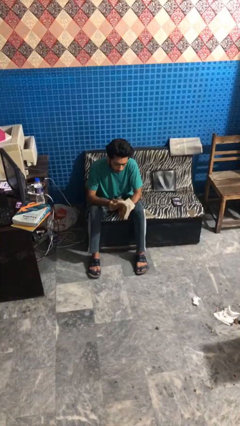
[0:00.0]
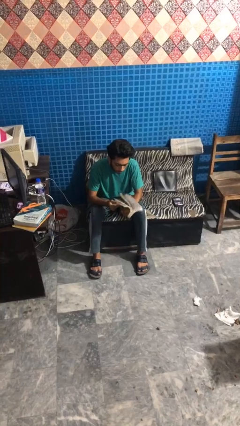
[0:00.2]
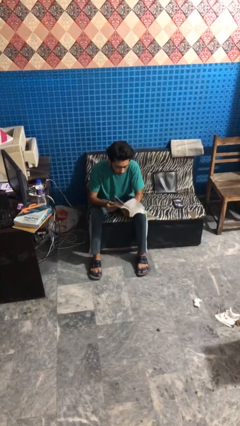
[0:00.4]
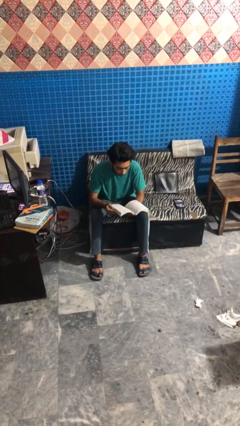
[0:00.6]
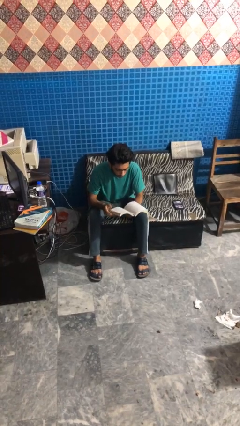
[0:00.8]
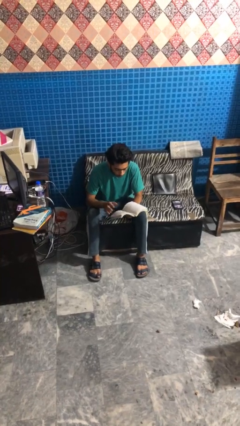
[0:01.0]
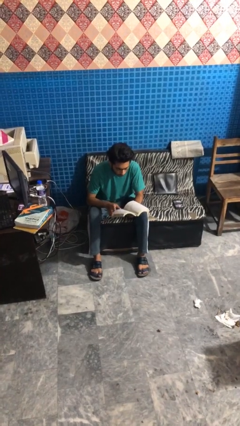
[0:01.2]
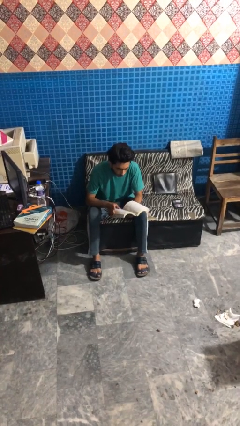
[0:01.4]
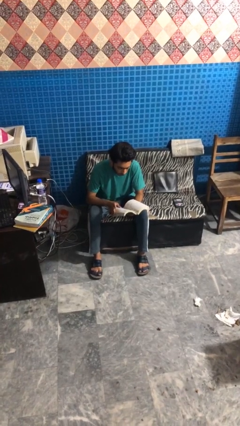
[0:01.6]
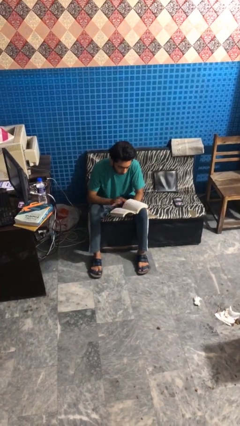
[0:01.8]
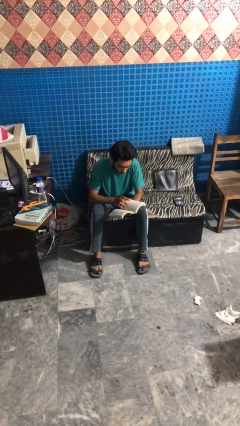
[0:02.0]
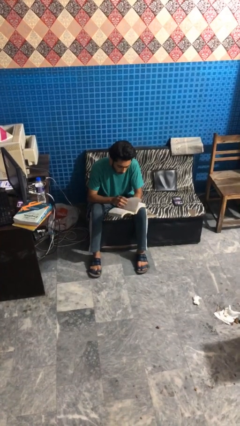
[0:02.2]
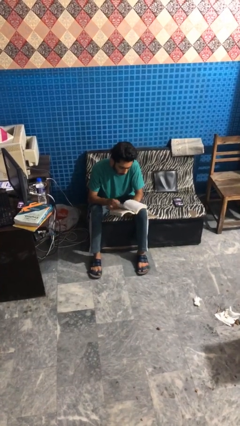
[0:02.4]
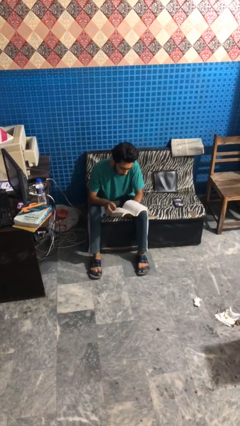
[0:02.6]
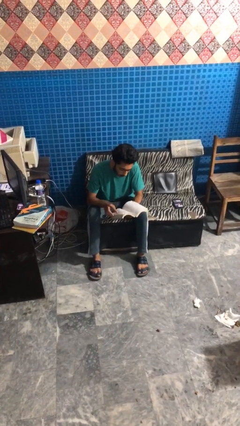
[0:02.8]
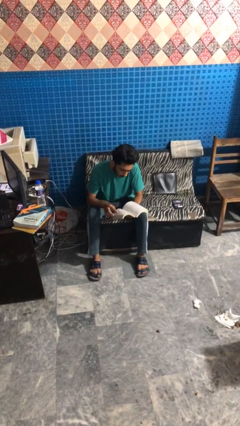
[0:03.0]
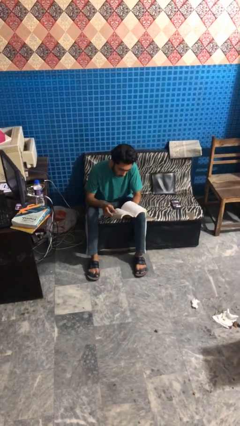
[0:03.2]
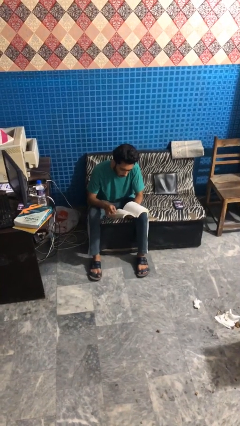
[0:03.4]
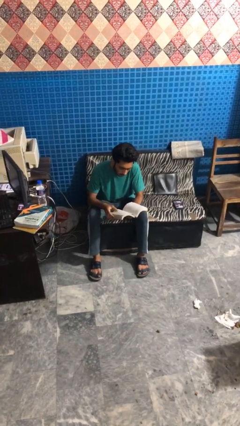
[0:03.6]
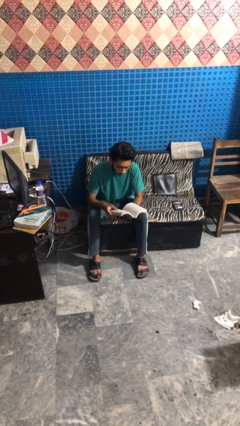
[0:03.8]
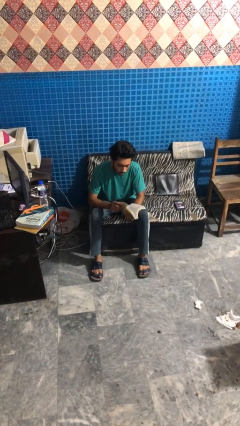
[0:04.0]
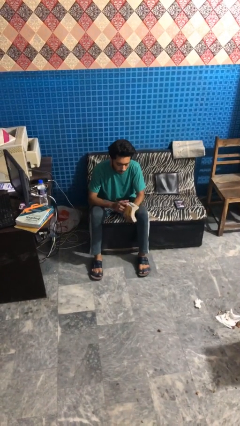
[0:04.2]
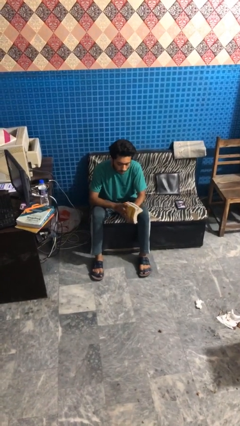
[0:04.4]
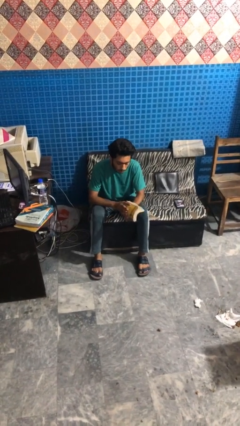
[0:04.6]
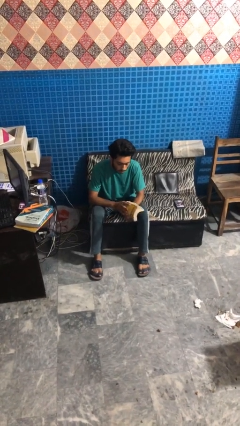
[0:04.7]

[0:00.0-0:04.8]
person reads magazine

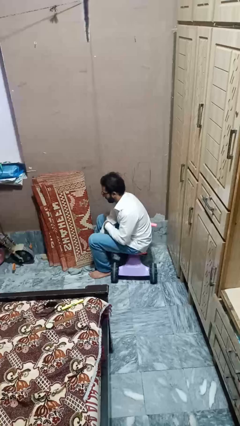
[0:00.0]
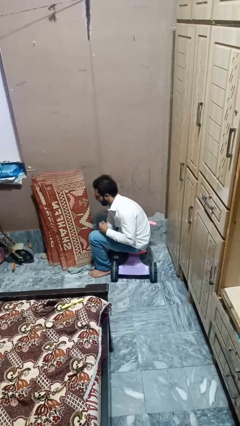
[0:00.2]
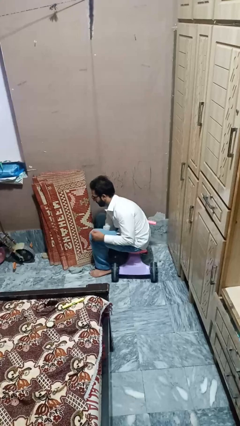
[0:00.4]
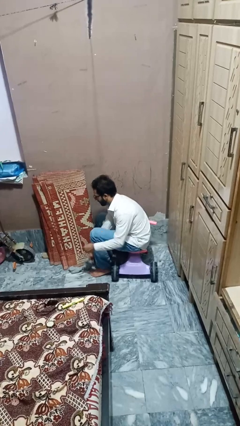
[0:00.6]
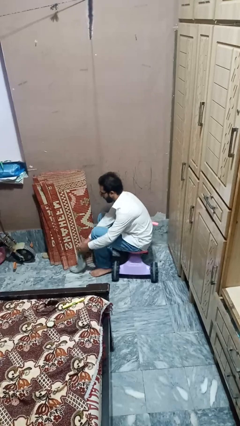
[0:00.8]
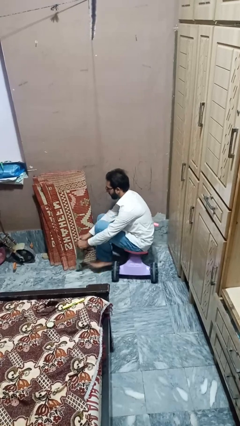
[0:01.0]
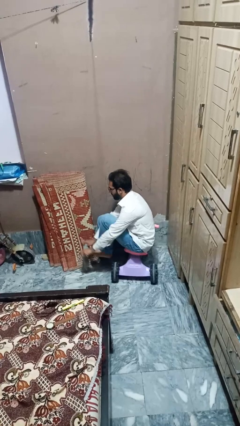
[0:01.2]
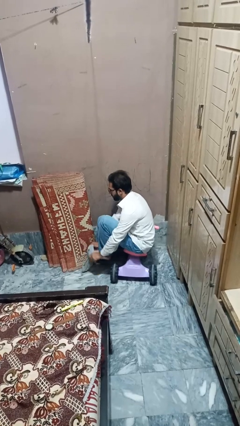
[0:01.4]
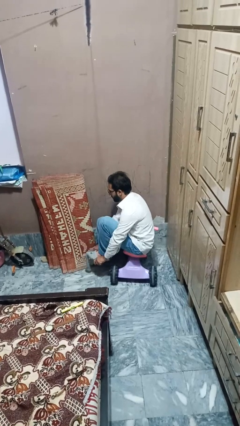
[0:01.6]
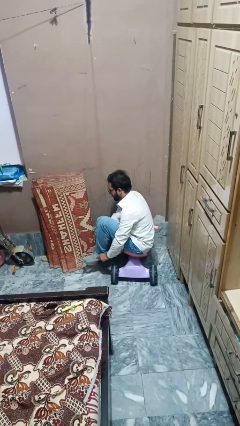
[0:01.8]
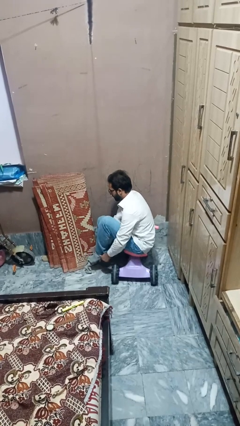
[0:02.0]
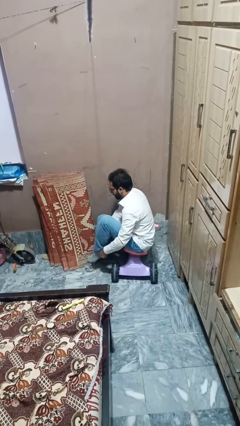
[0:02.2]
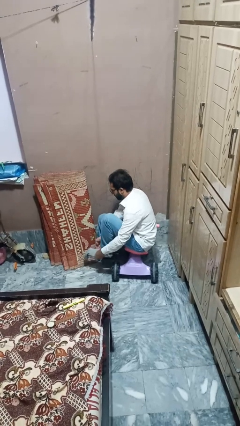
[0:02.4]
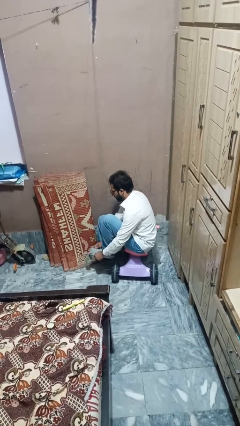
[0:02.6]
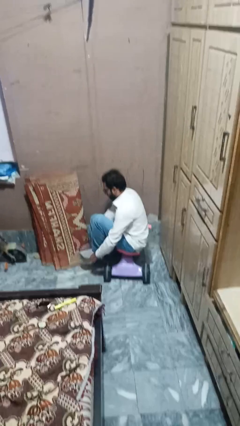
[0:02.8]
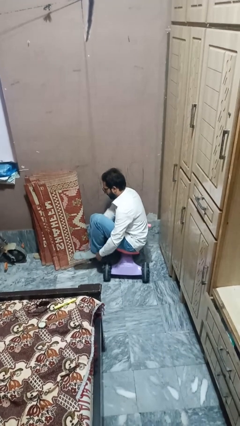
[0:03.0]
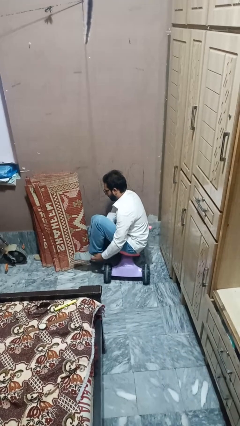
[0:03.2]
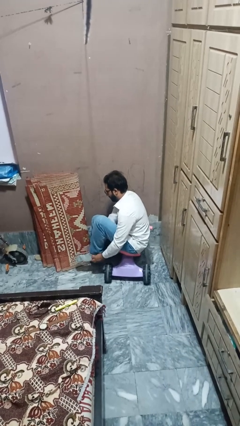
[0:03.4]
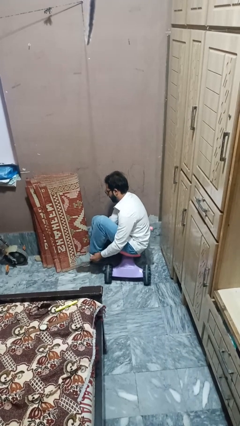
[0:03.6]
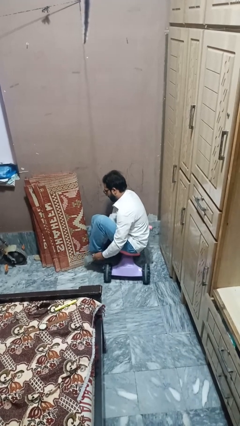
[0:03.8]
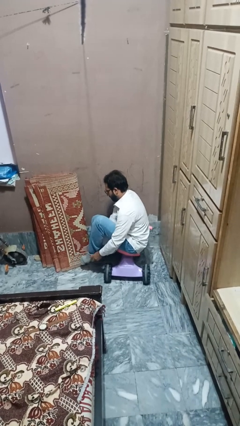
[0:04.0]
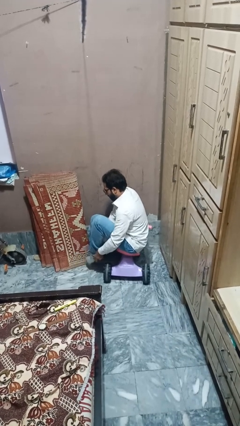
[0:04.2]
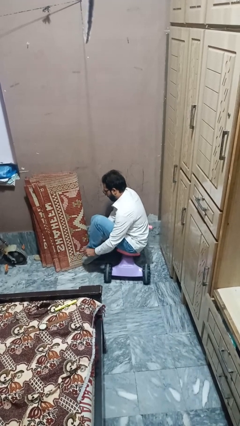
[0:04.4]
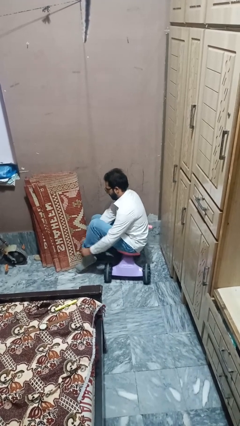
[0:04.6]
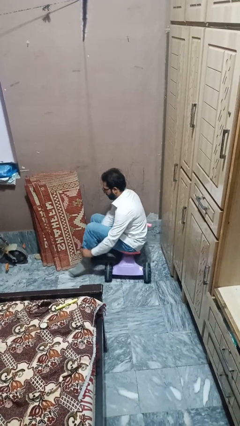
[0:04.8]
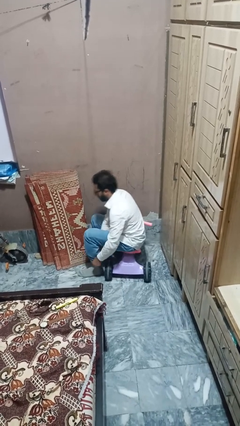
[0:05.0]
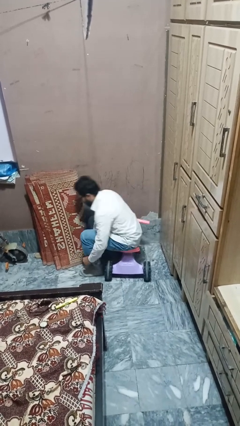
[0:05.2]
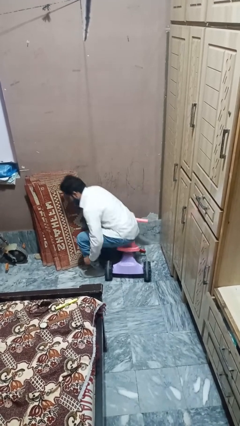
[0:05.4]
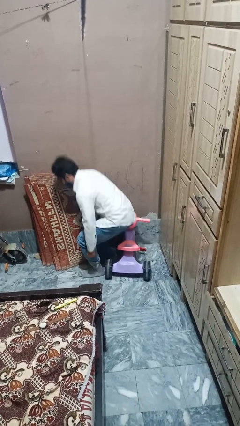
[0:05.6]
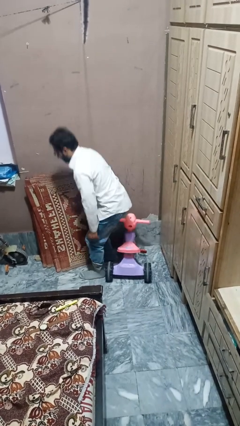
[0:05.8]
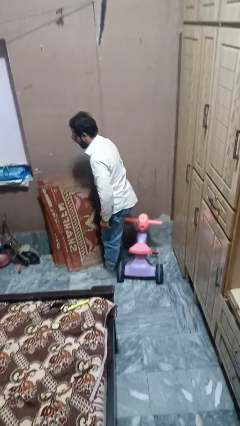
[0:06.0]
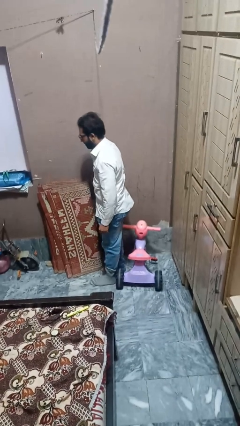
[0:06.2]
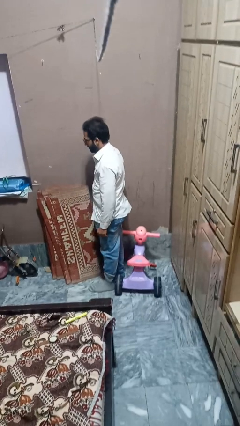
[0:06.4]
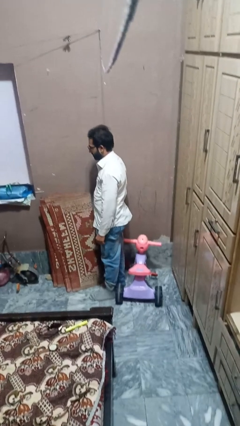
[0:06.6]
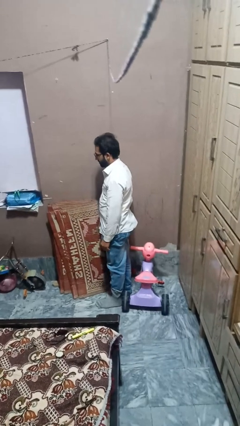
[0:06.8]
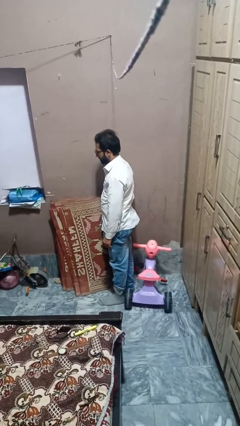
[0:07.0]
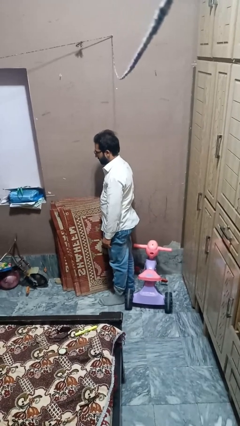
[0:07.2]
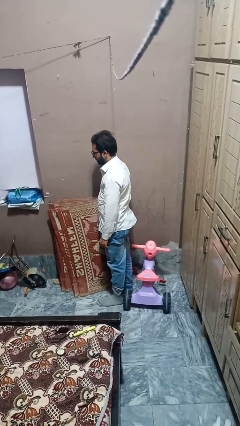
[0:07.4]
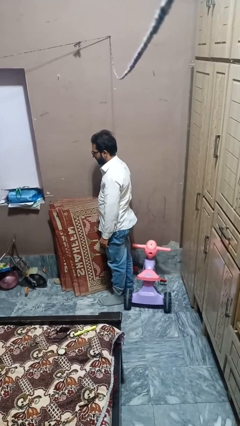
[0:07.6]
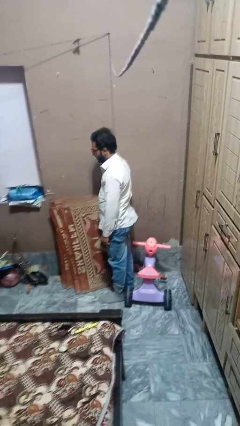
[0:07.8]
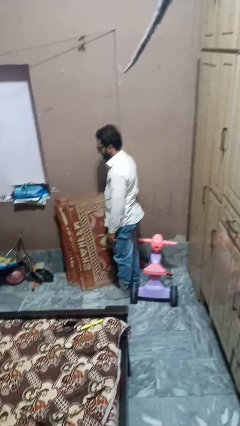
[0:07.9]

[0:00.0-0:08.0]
person puts on socks

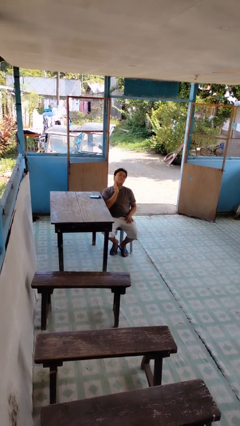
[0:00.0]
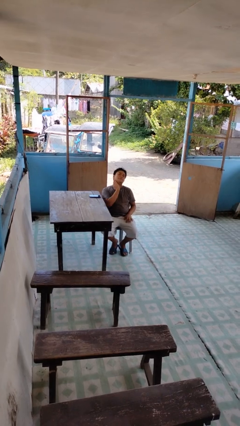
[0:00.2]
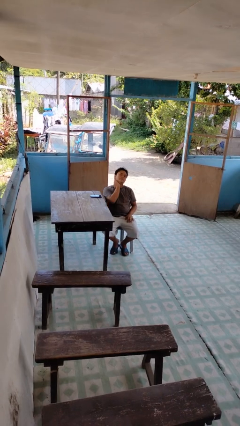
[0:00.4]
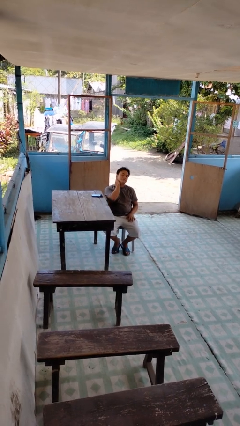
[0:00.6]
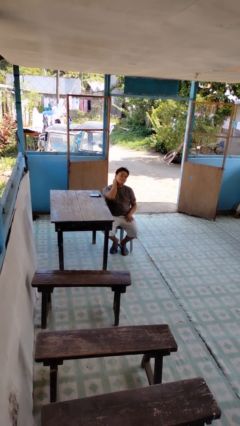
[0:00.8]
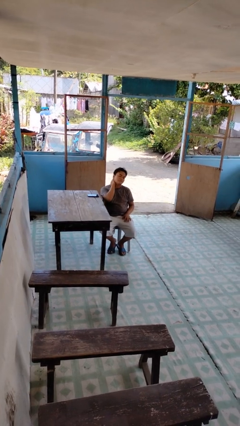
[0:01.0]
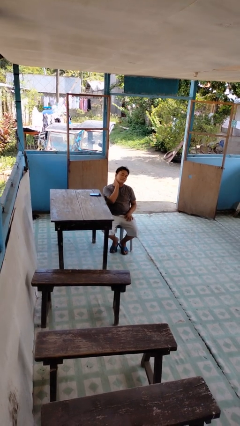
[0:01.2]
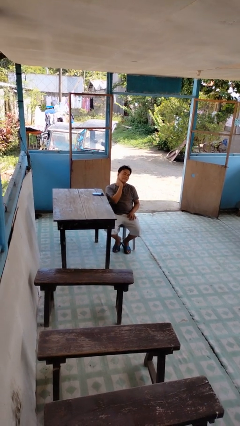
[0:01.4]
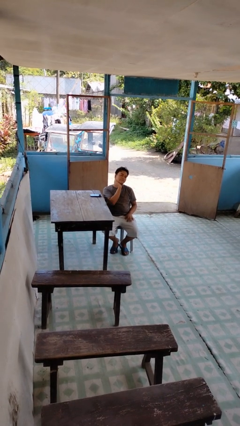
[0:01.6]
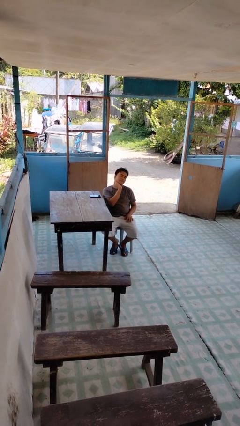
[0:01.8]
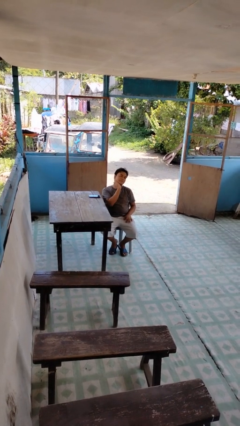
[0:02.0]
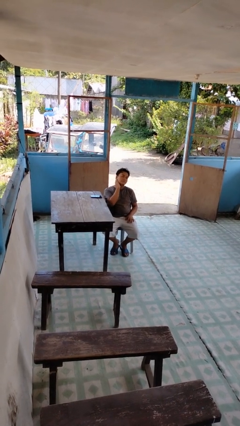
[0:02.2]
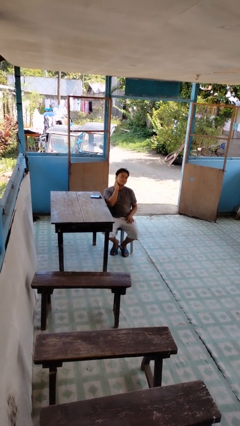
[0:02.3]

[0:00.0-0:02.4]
person rubs neck

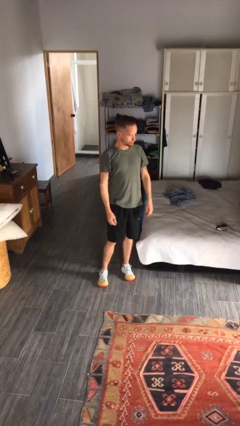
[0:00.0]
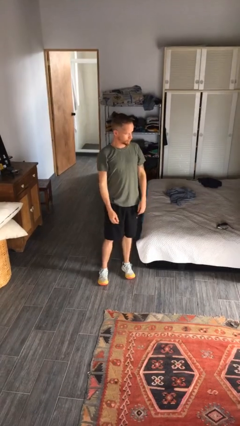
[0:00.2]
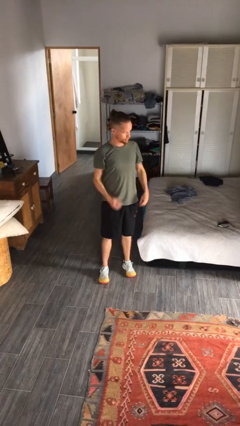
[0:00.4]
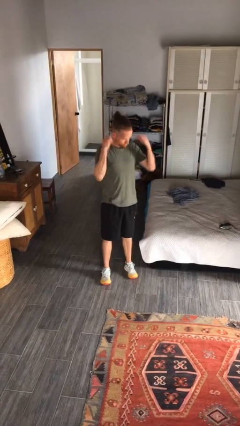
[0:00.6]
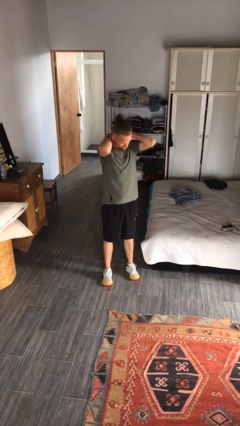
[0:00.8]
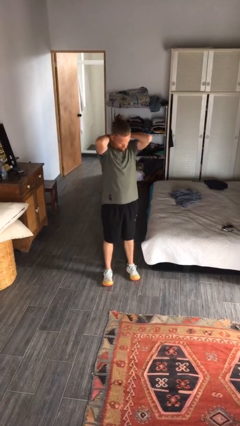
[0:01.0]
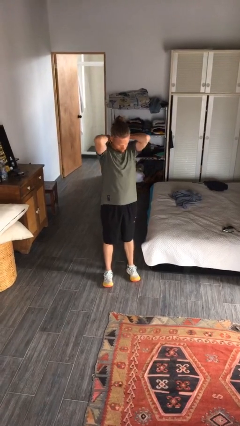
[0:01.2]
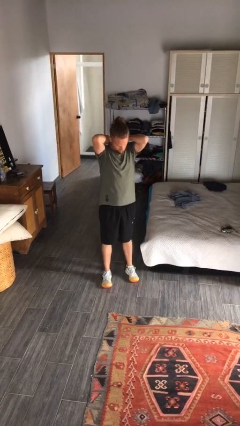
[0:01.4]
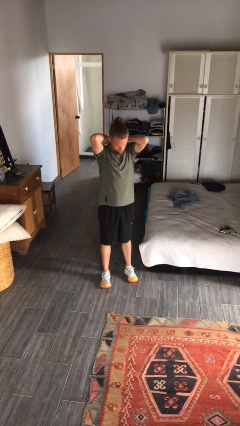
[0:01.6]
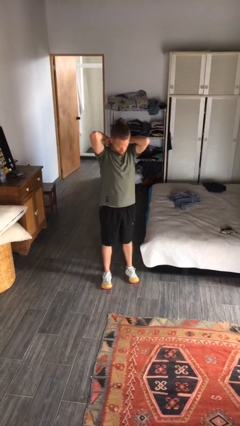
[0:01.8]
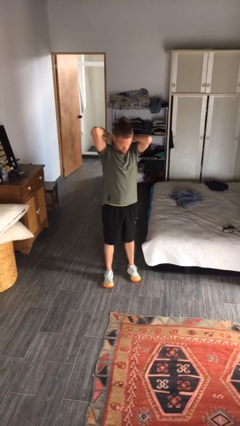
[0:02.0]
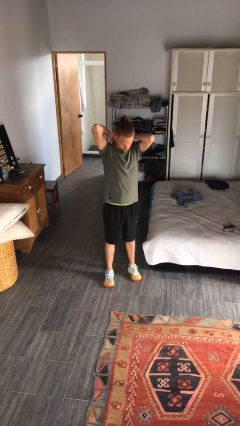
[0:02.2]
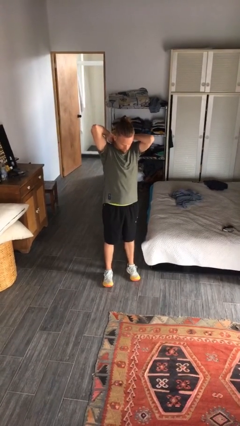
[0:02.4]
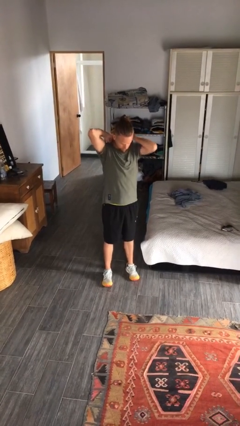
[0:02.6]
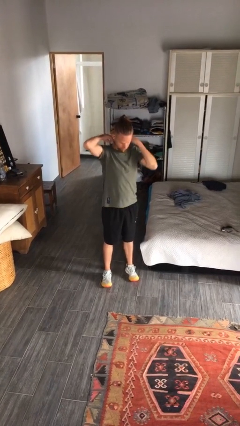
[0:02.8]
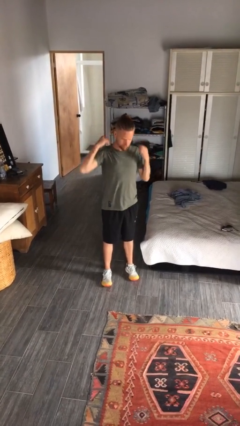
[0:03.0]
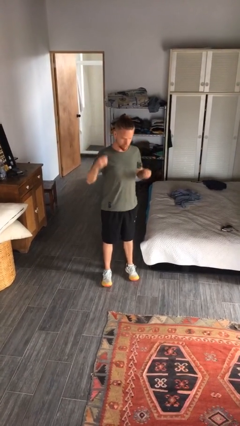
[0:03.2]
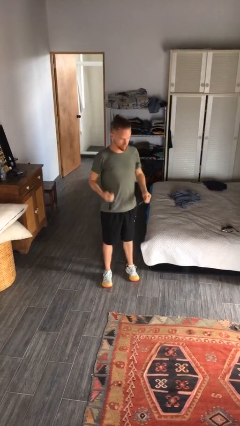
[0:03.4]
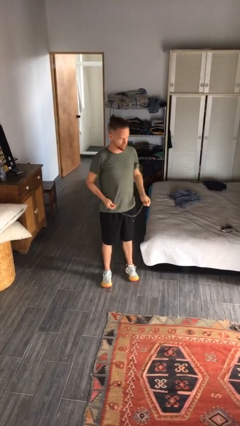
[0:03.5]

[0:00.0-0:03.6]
person takes off necklace
